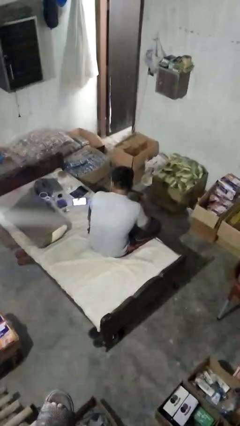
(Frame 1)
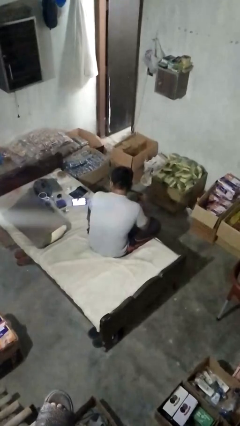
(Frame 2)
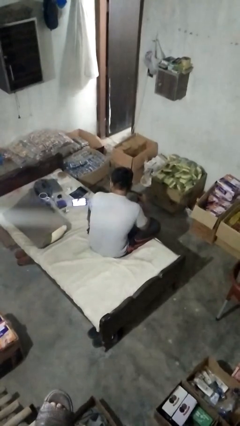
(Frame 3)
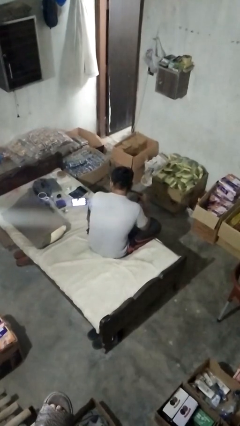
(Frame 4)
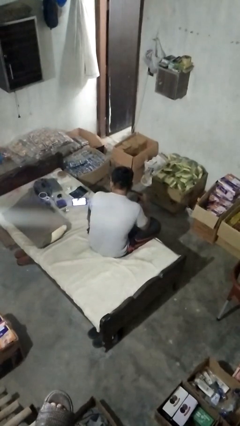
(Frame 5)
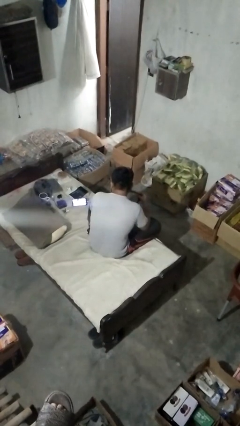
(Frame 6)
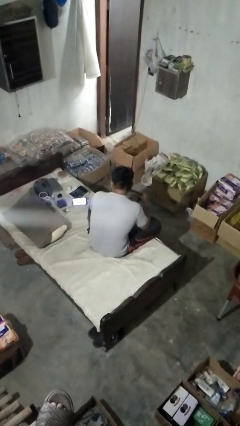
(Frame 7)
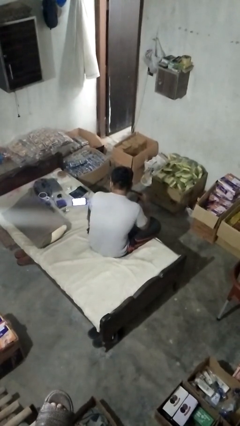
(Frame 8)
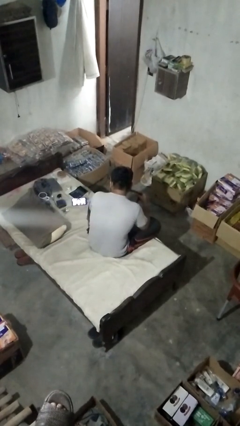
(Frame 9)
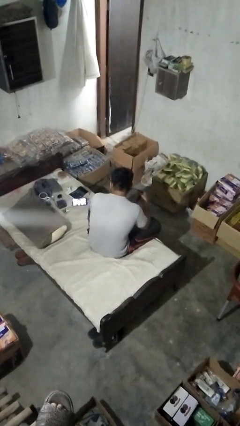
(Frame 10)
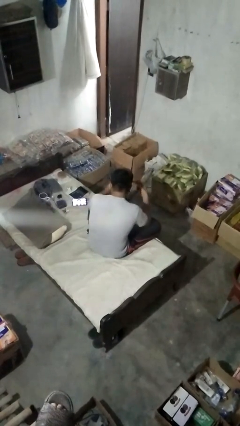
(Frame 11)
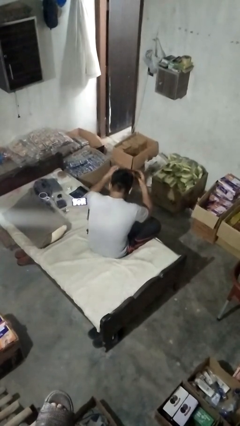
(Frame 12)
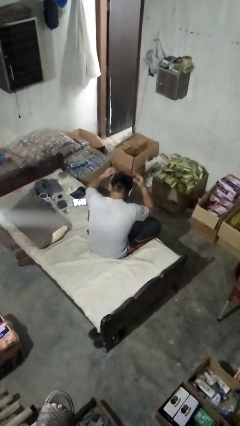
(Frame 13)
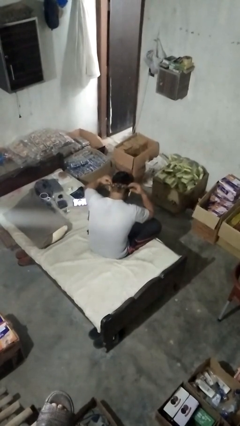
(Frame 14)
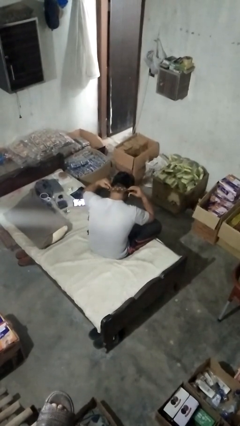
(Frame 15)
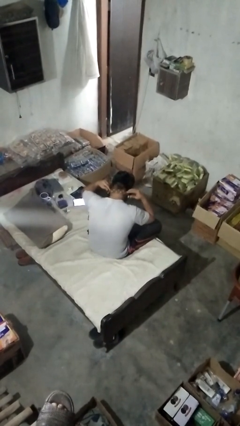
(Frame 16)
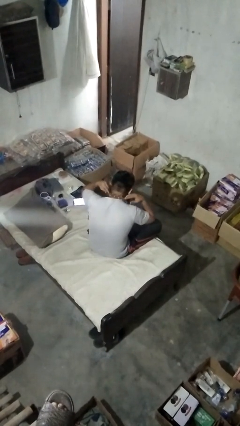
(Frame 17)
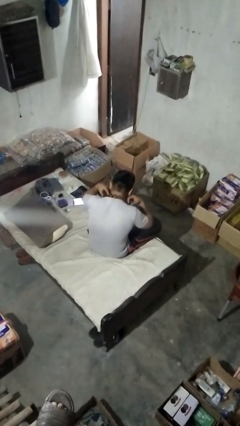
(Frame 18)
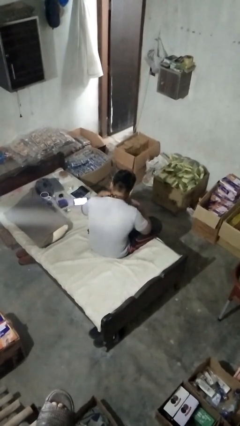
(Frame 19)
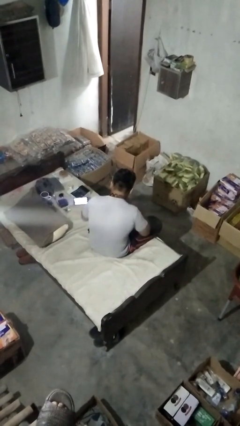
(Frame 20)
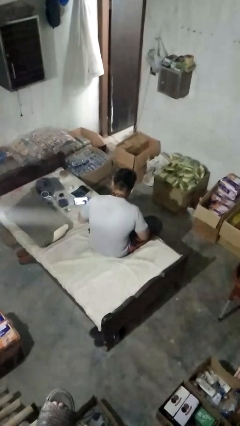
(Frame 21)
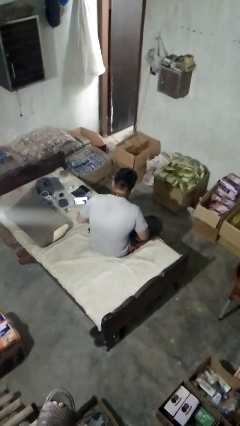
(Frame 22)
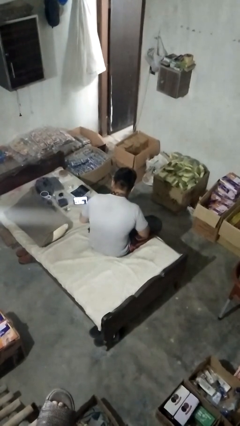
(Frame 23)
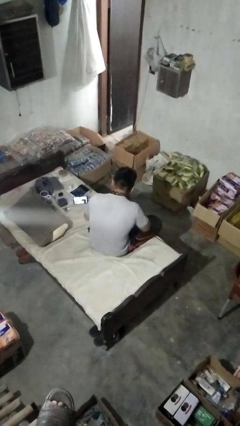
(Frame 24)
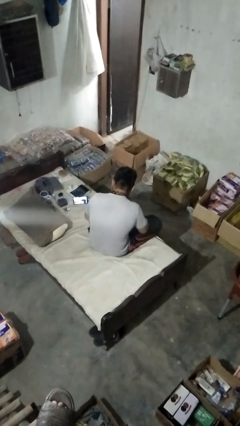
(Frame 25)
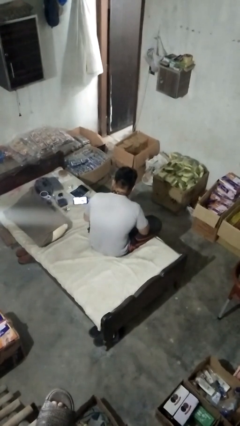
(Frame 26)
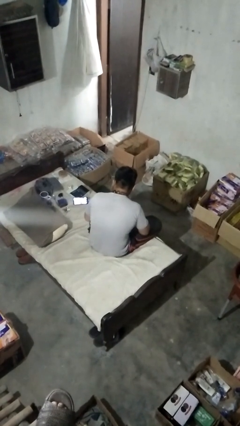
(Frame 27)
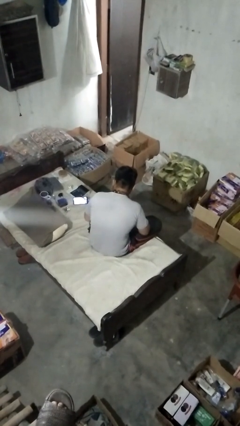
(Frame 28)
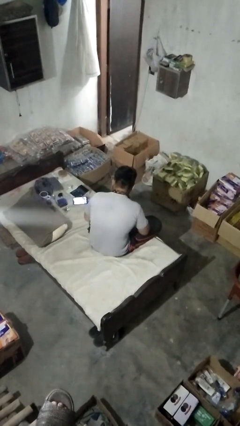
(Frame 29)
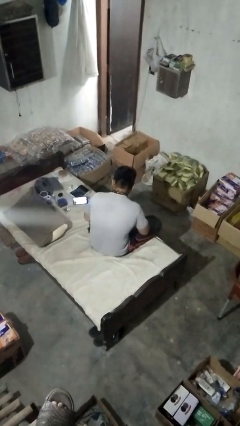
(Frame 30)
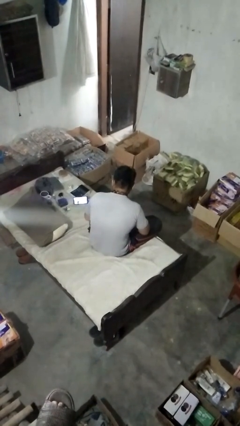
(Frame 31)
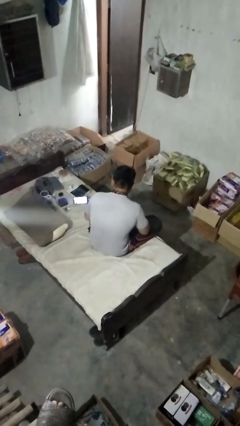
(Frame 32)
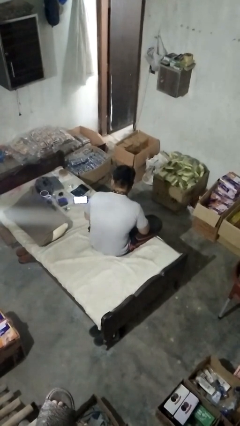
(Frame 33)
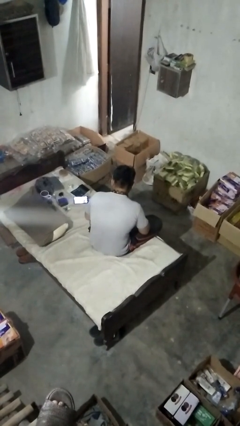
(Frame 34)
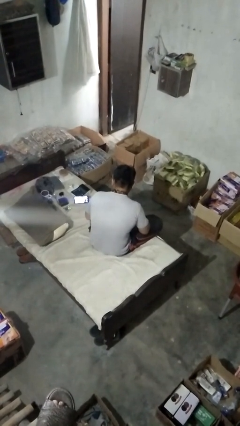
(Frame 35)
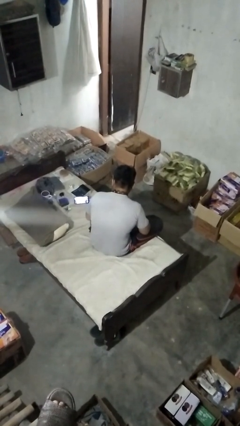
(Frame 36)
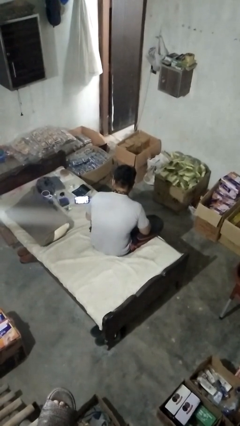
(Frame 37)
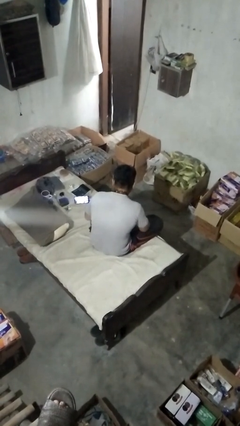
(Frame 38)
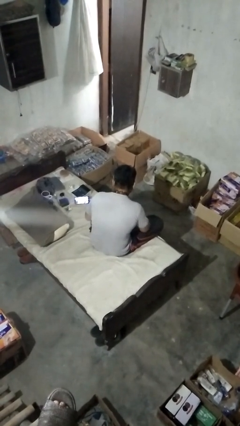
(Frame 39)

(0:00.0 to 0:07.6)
person puts on necktie

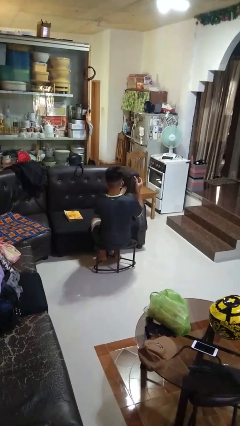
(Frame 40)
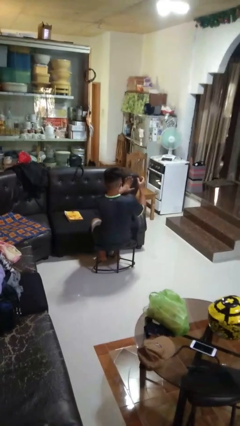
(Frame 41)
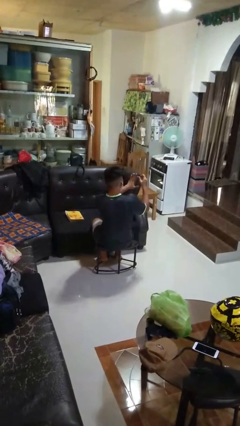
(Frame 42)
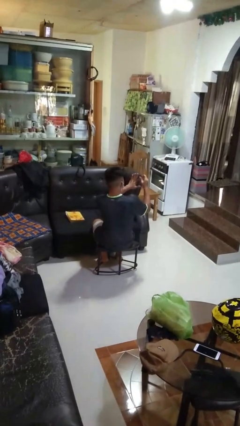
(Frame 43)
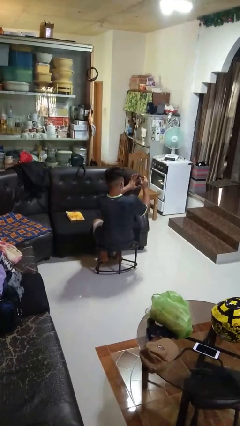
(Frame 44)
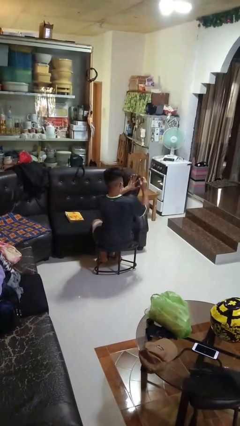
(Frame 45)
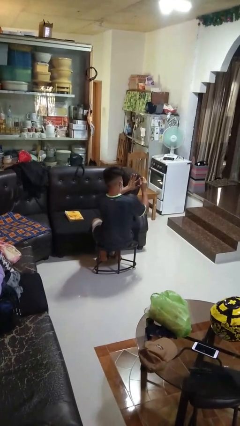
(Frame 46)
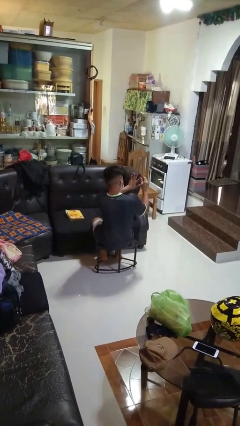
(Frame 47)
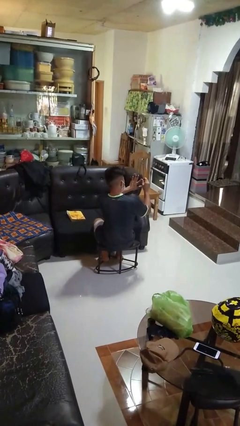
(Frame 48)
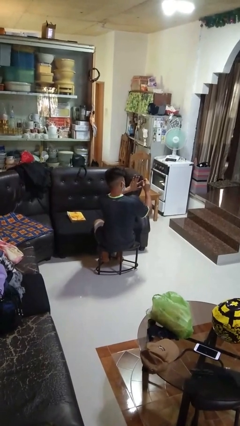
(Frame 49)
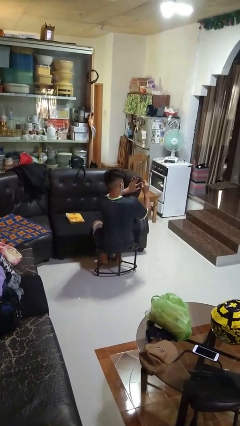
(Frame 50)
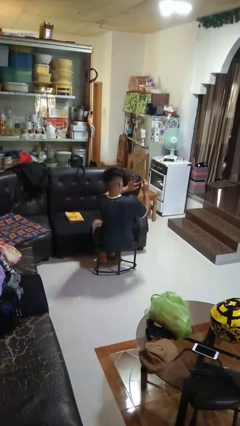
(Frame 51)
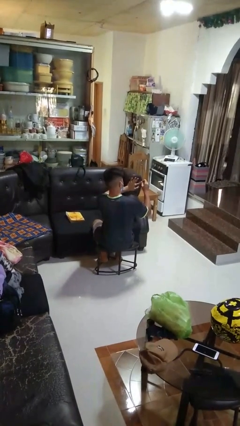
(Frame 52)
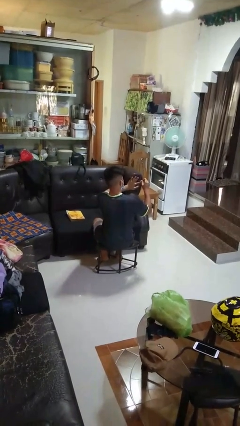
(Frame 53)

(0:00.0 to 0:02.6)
person clips fingernails

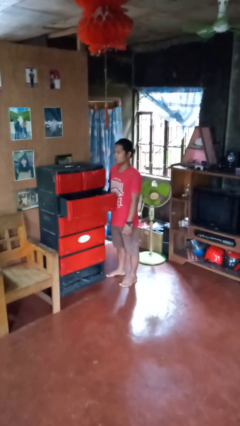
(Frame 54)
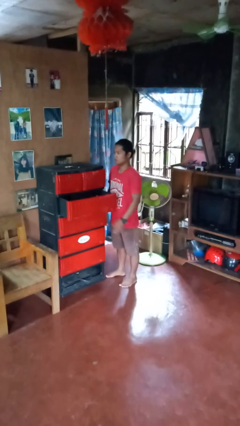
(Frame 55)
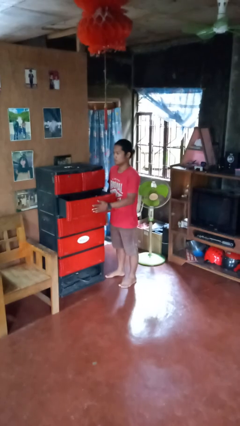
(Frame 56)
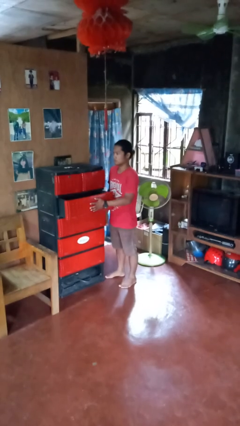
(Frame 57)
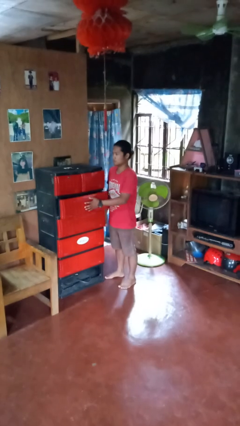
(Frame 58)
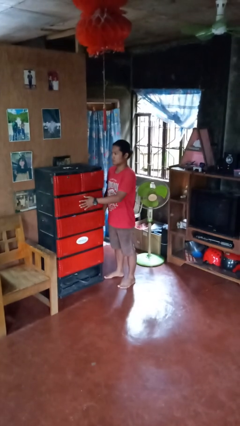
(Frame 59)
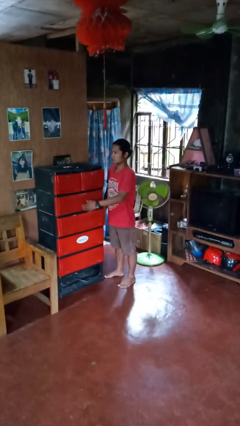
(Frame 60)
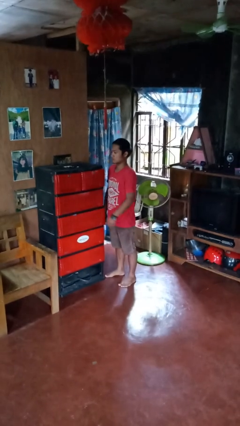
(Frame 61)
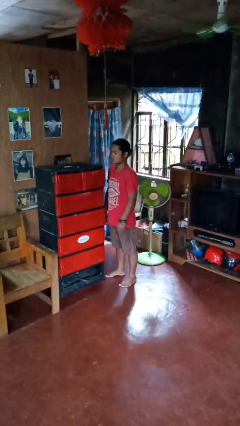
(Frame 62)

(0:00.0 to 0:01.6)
person closes dresser drawer

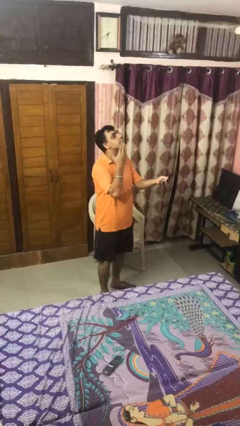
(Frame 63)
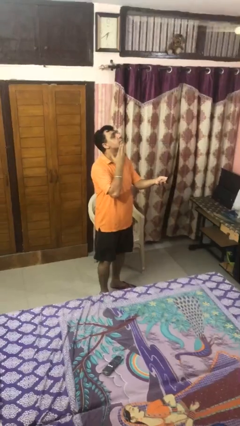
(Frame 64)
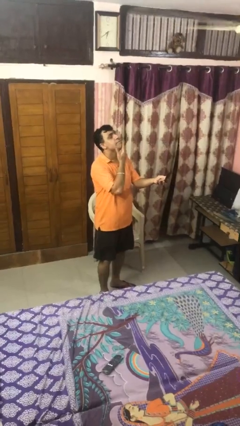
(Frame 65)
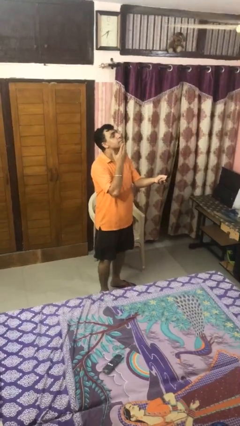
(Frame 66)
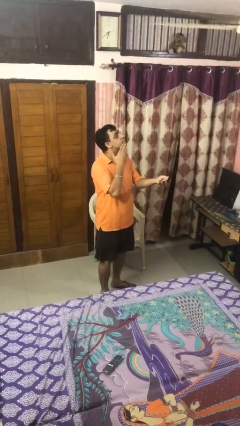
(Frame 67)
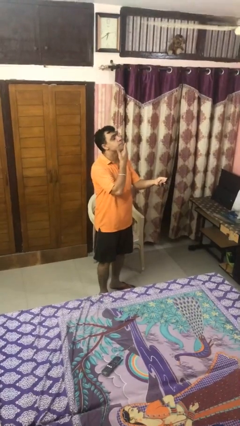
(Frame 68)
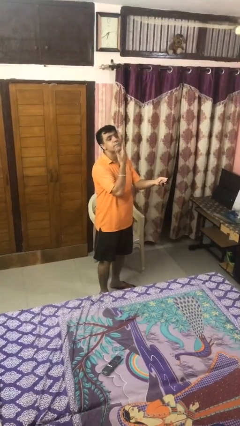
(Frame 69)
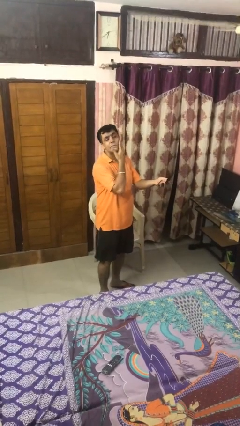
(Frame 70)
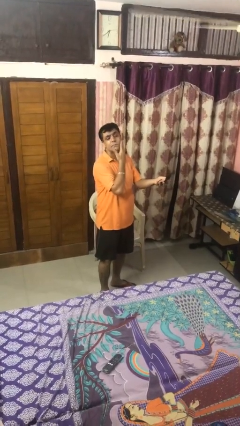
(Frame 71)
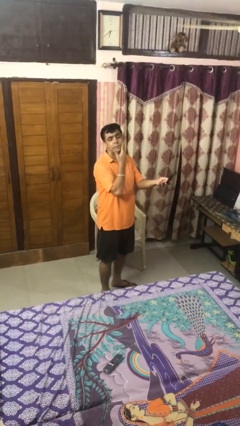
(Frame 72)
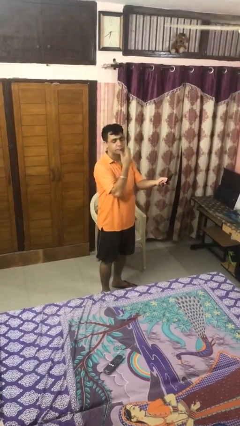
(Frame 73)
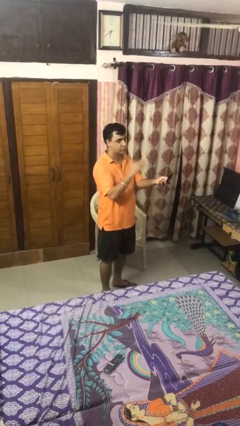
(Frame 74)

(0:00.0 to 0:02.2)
person applies foundation makeup

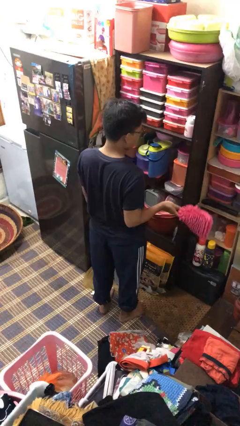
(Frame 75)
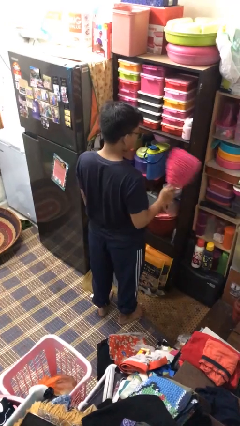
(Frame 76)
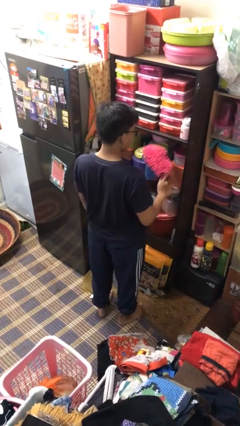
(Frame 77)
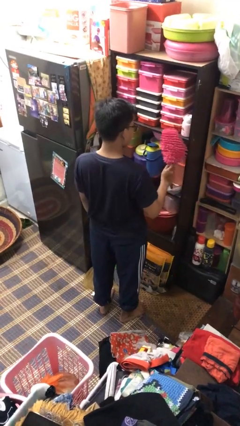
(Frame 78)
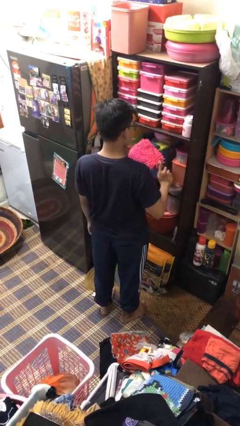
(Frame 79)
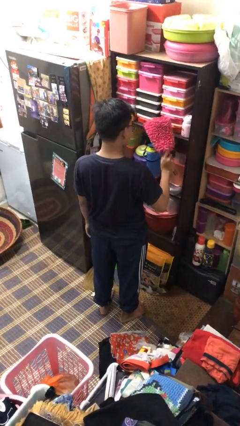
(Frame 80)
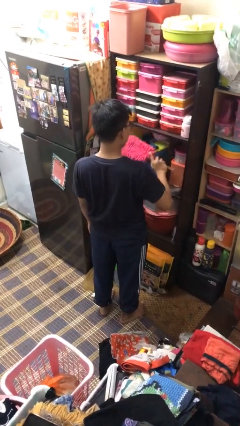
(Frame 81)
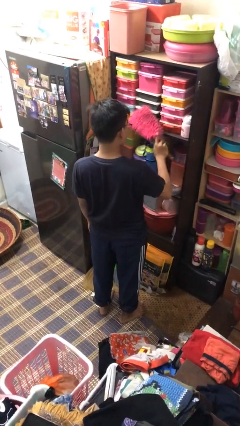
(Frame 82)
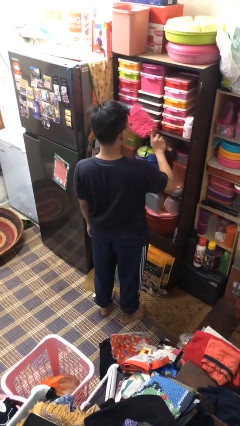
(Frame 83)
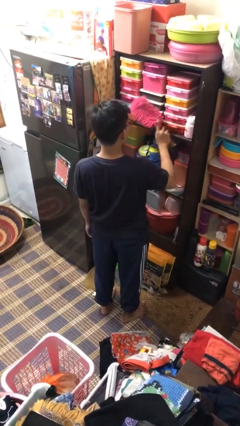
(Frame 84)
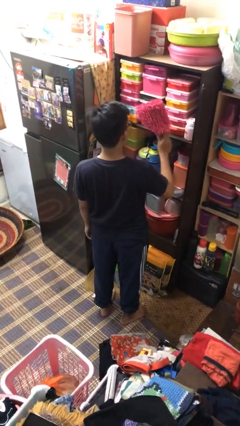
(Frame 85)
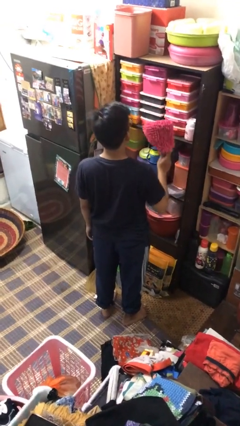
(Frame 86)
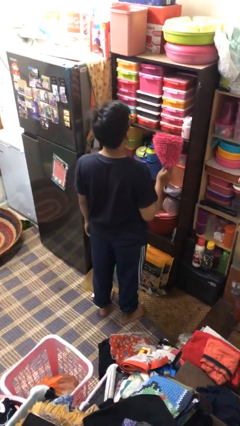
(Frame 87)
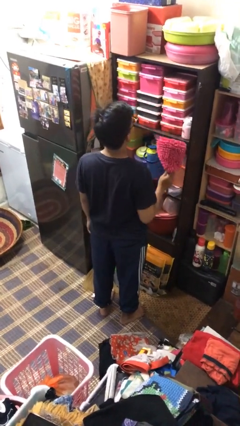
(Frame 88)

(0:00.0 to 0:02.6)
person dusts furniture

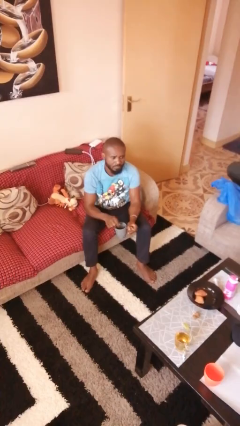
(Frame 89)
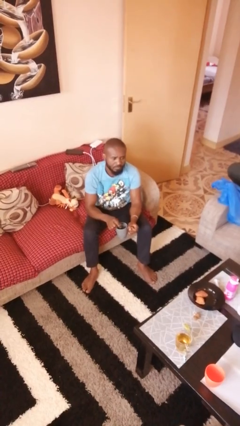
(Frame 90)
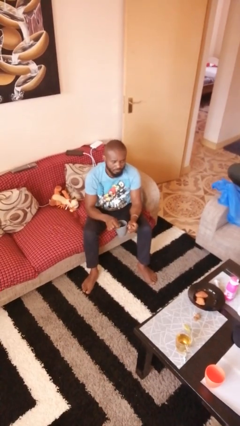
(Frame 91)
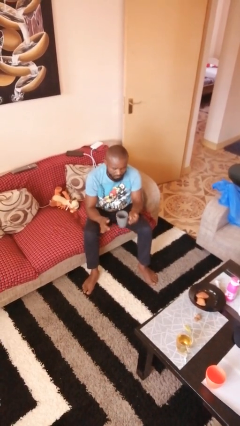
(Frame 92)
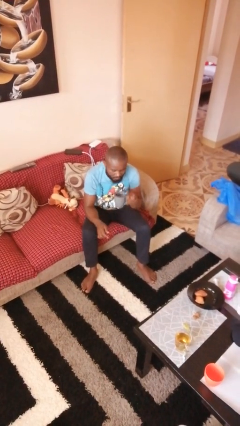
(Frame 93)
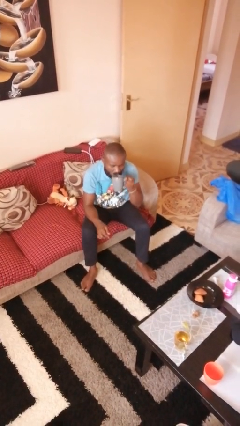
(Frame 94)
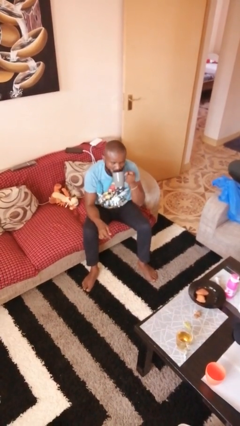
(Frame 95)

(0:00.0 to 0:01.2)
person drinks from mug
